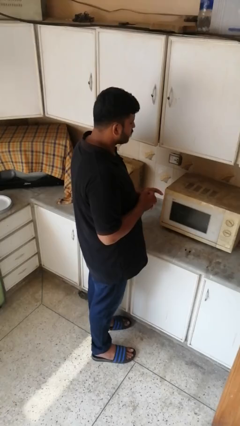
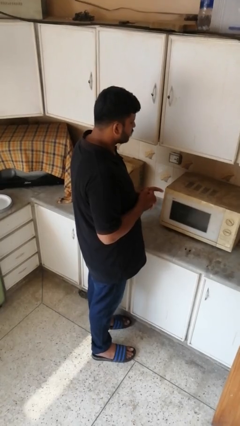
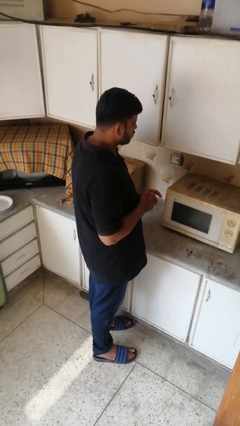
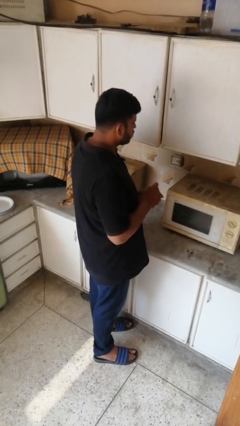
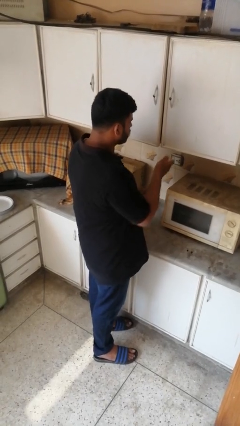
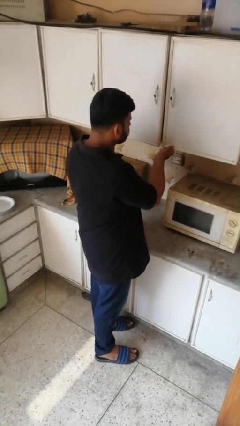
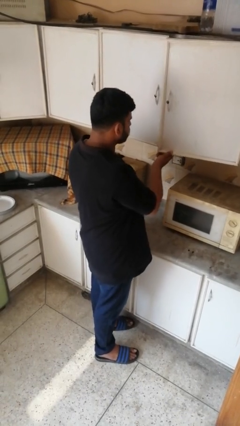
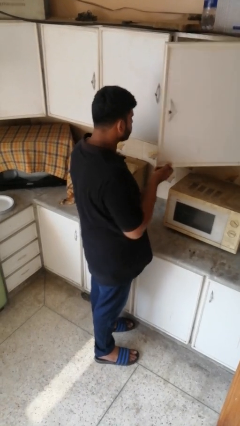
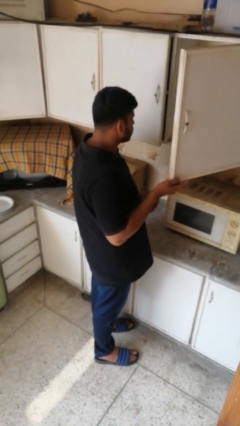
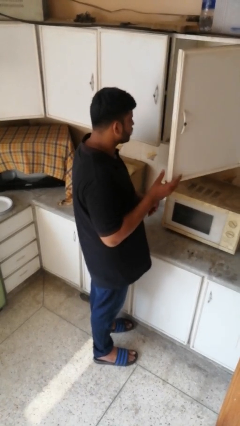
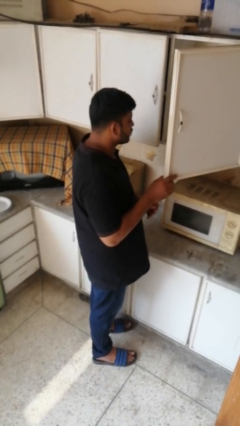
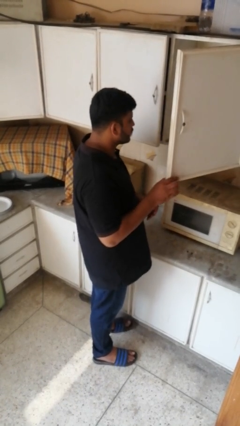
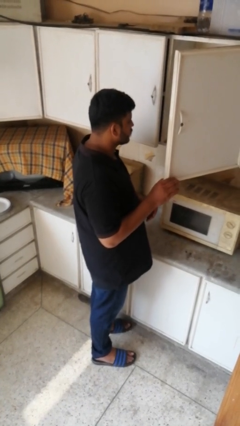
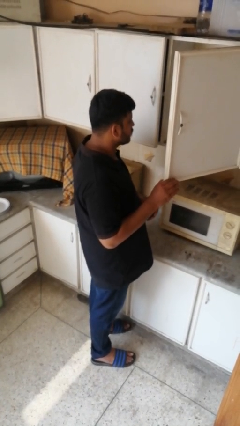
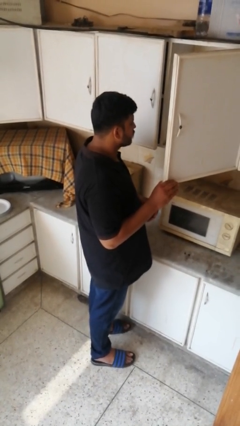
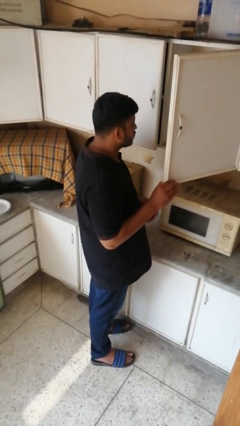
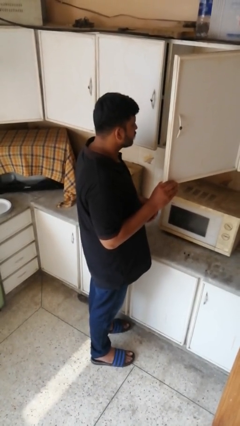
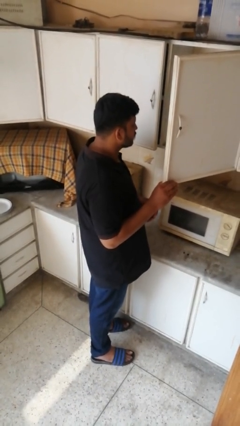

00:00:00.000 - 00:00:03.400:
person opens cabinet

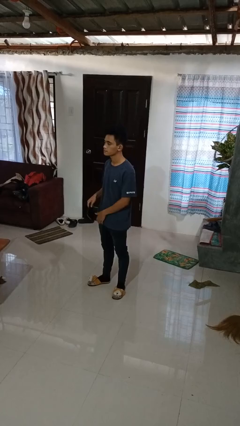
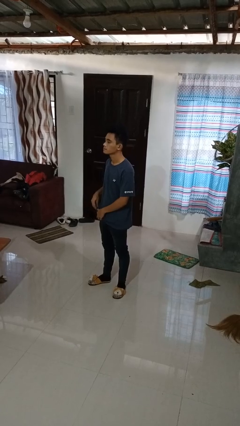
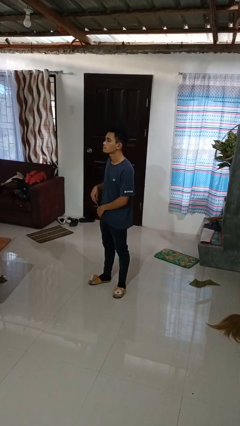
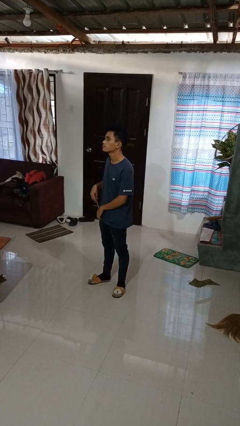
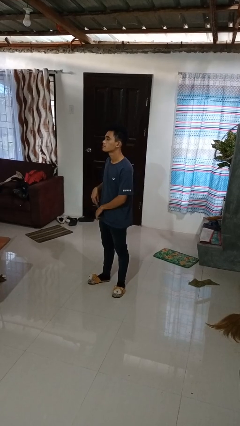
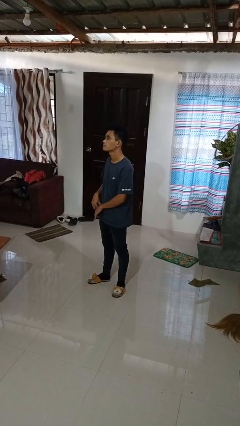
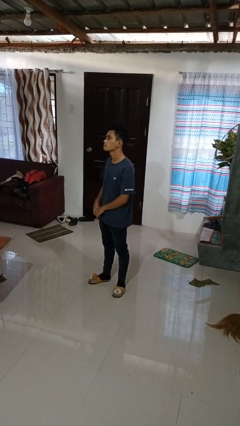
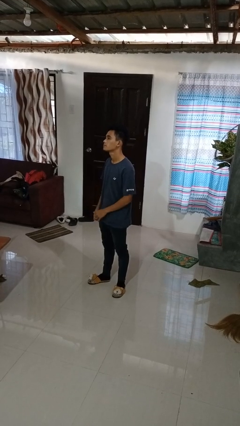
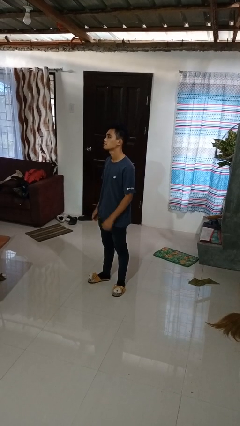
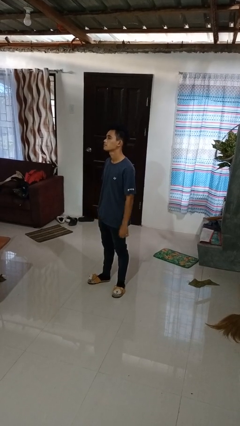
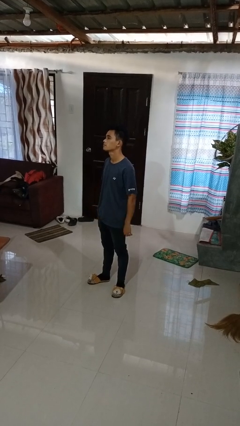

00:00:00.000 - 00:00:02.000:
person puts phone into pocket

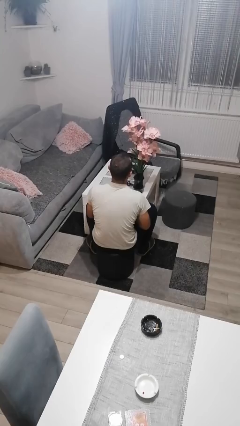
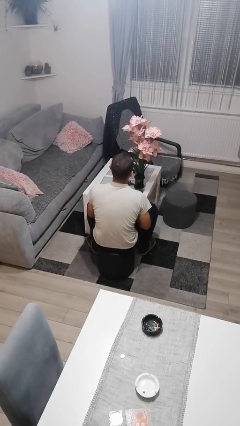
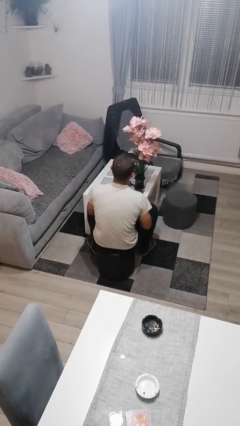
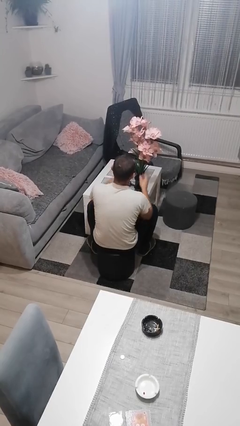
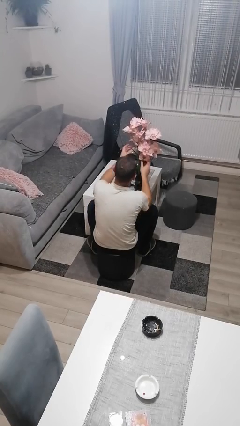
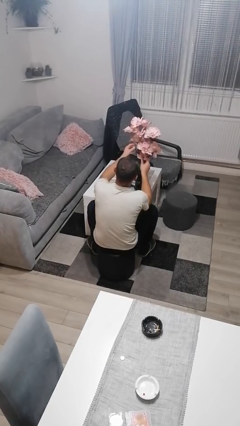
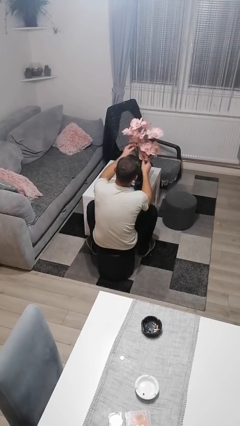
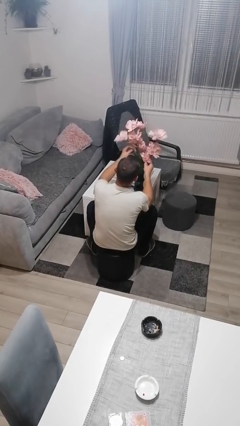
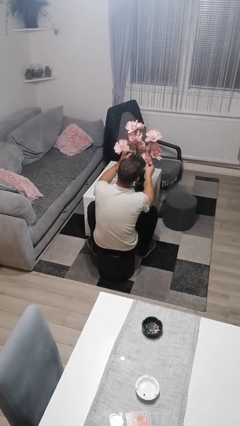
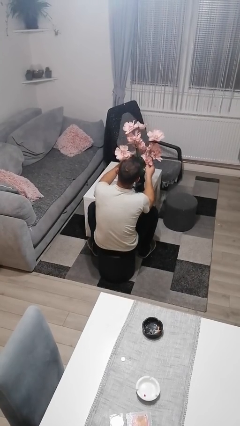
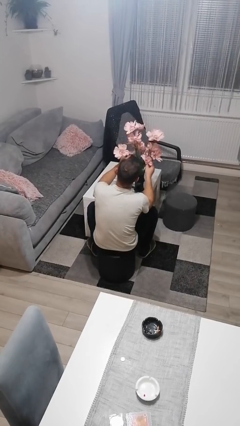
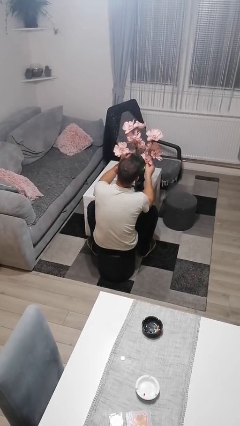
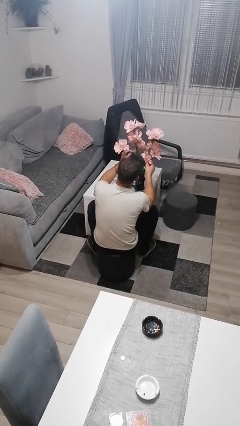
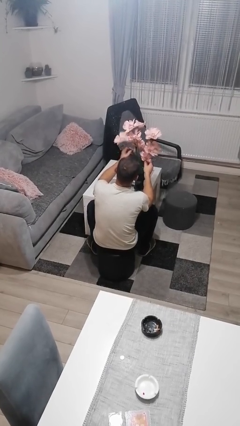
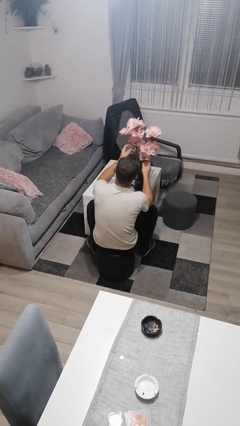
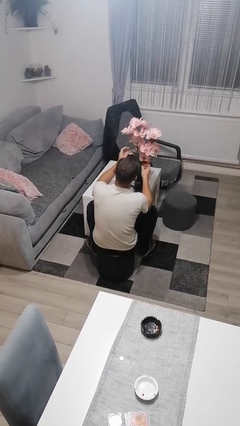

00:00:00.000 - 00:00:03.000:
person arranges flowers in vase

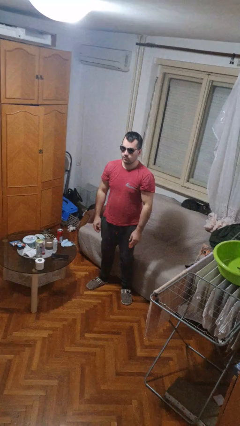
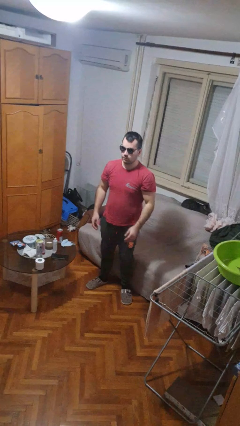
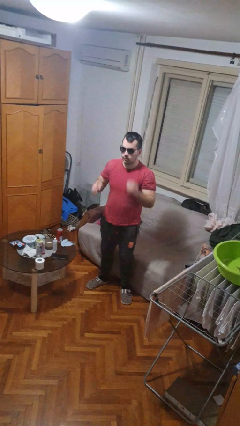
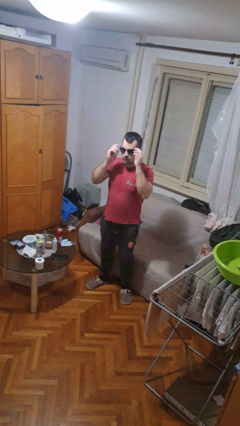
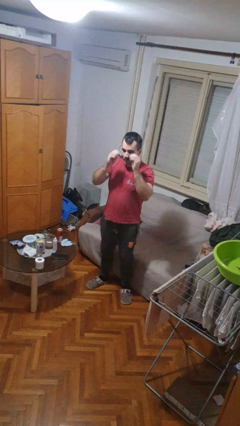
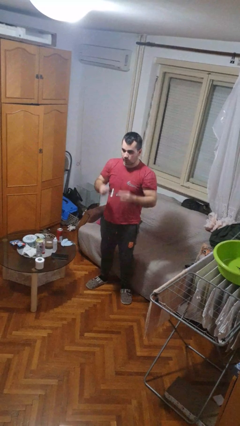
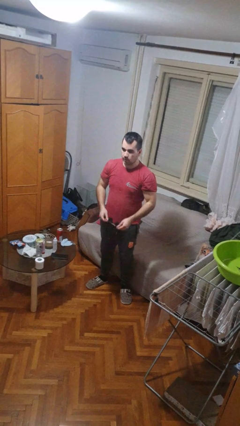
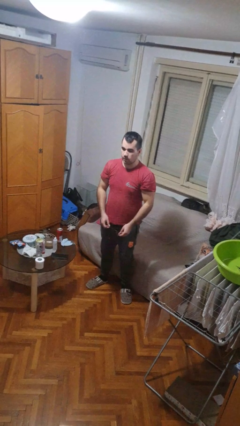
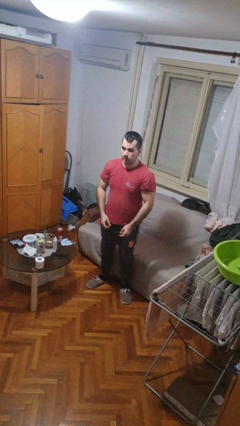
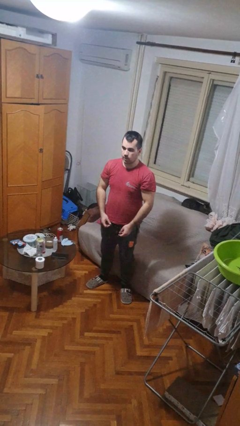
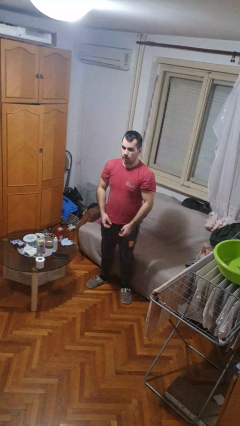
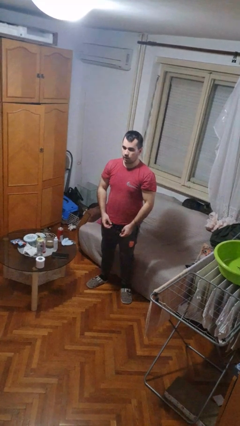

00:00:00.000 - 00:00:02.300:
person takes off sunglasses

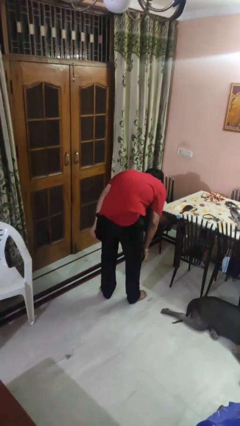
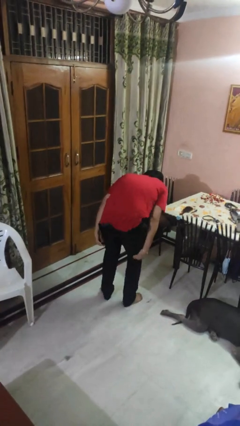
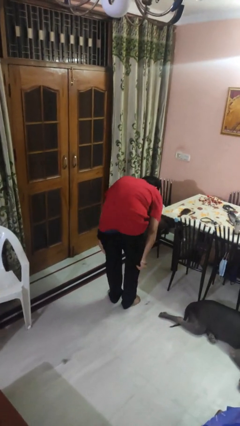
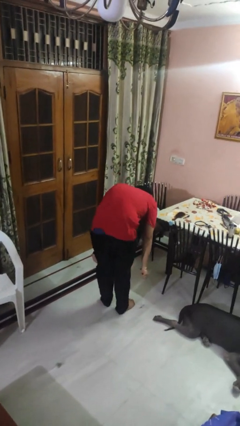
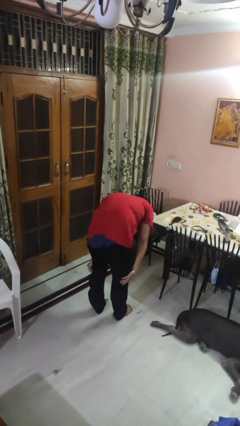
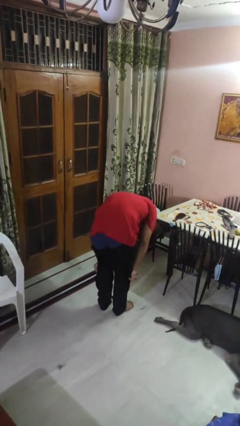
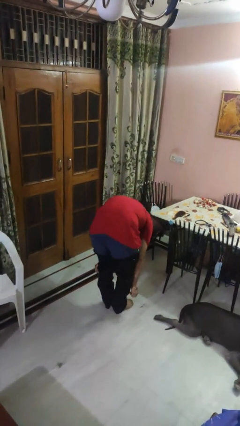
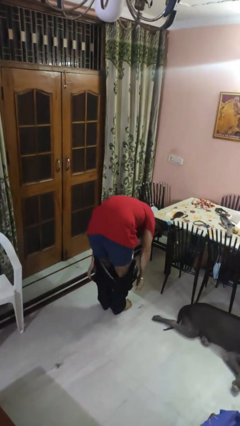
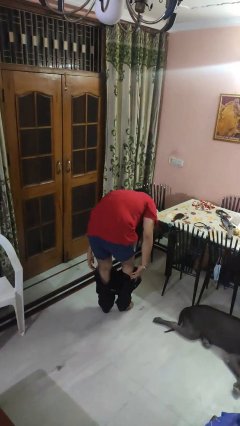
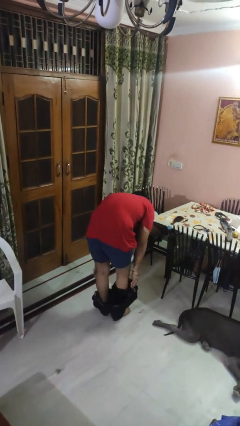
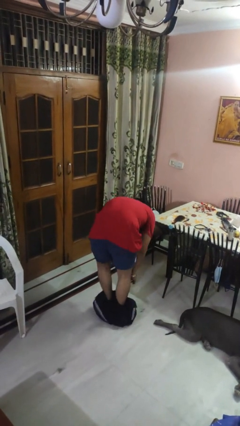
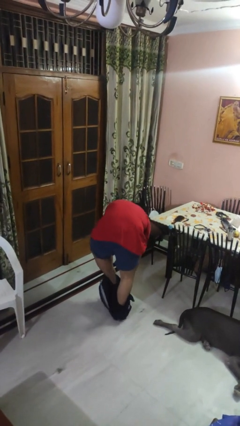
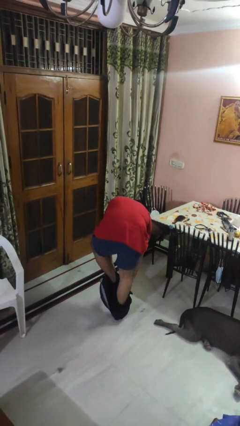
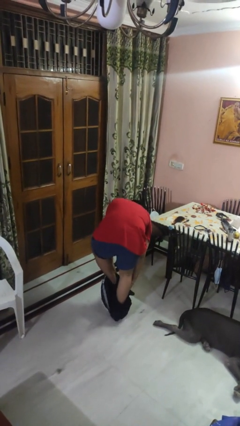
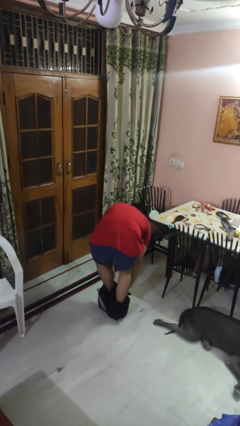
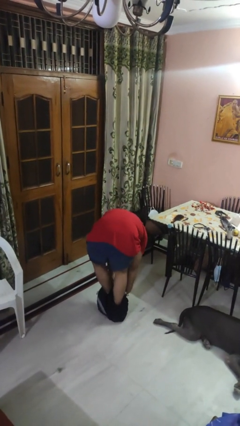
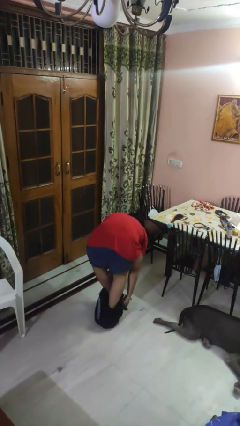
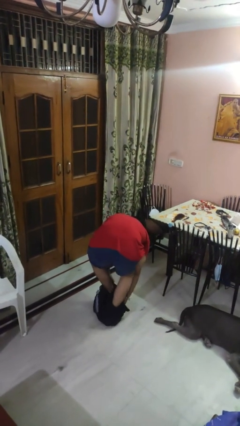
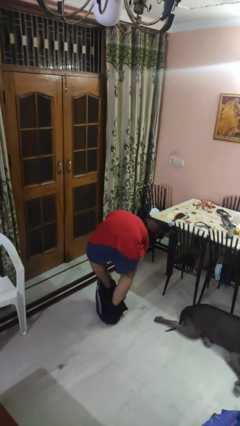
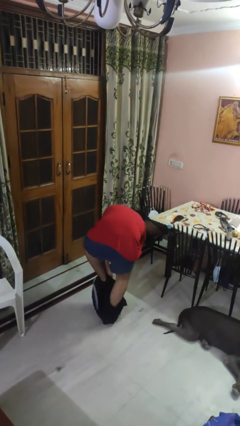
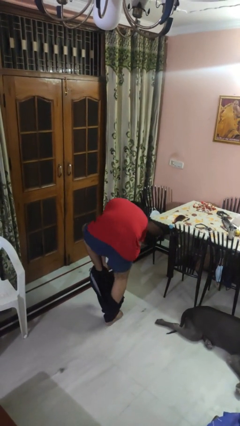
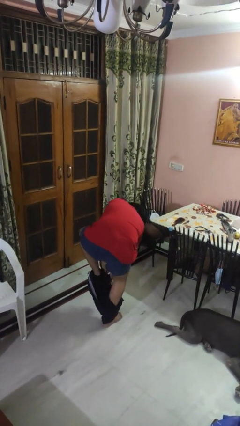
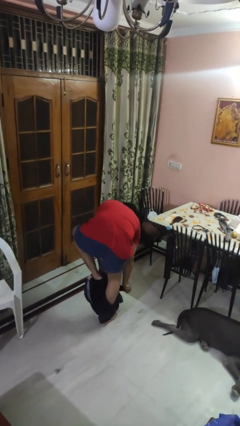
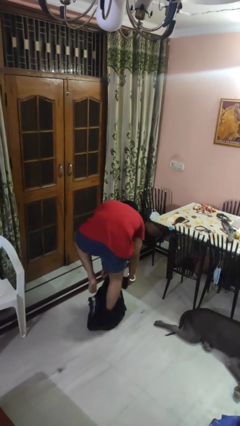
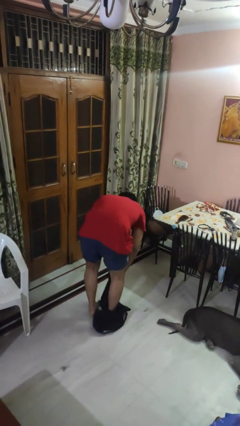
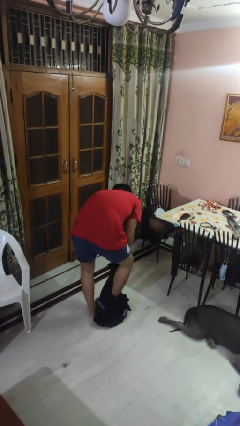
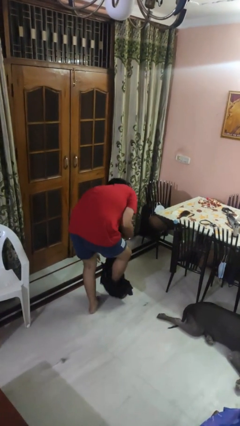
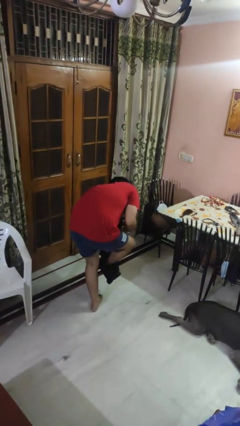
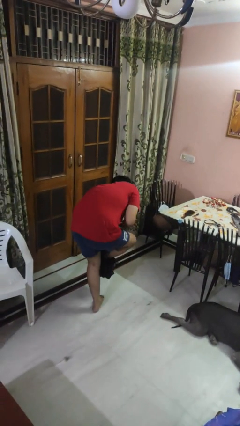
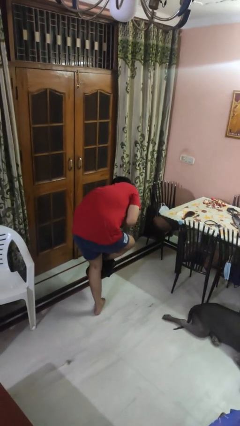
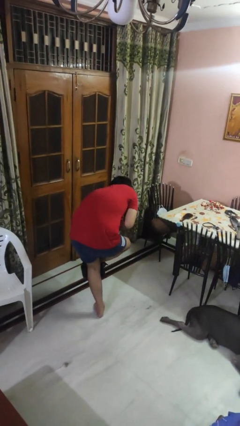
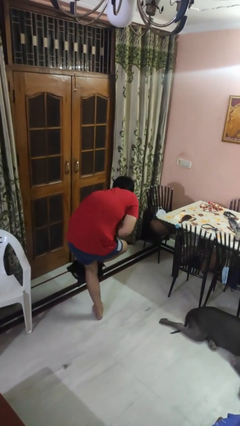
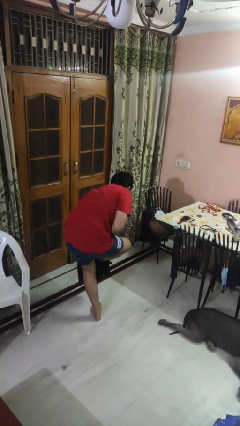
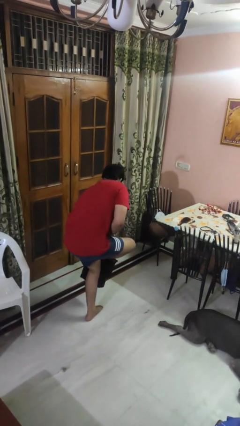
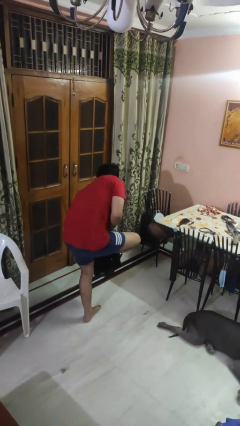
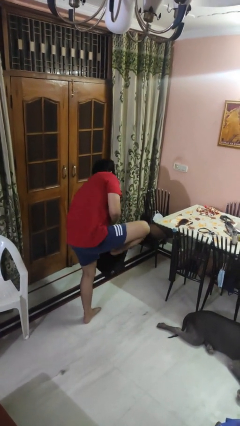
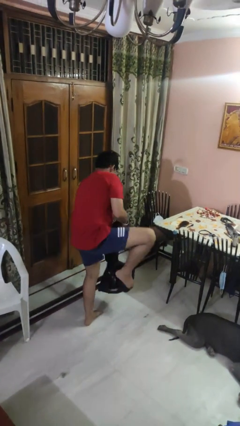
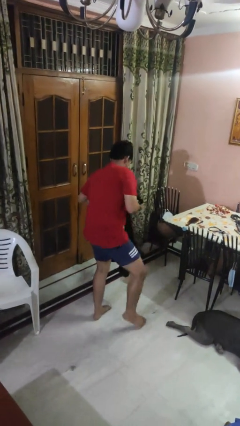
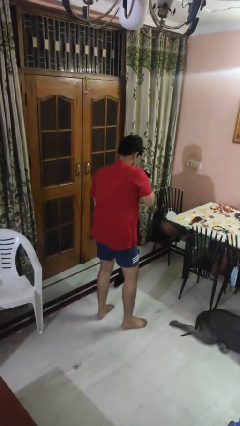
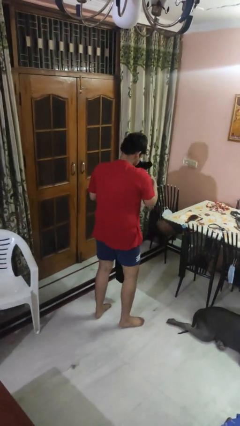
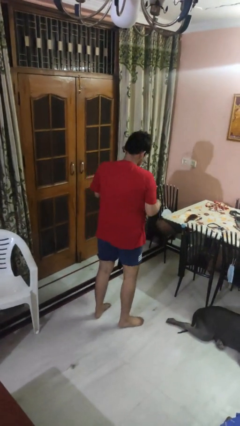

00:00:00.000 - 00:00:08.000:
person takes off pants
